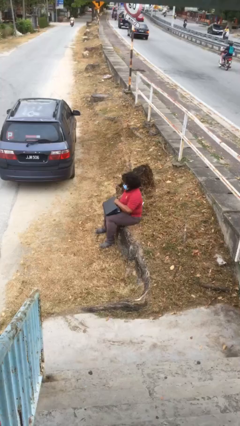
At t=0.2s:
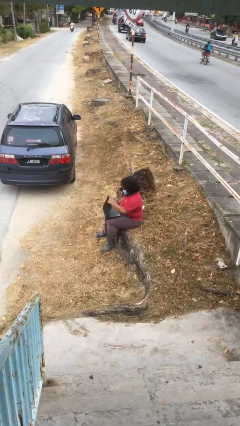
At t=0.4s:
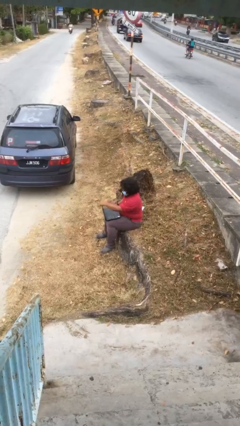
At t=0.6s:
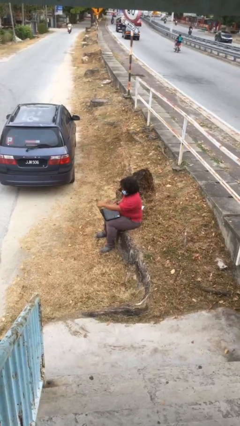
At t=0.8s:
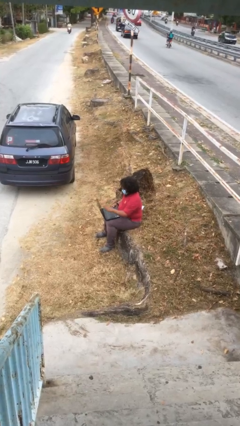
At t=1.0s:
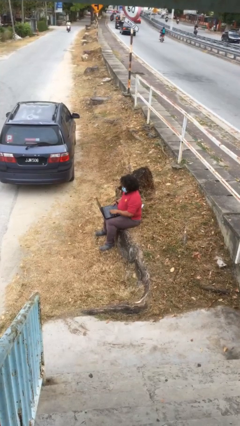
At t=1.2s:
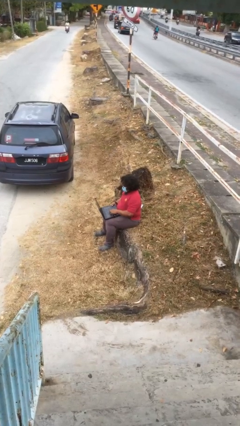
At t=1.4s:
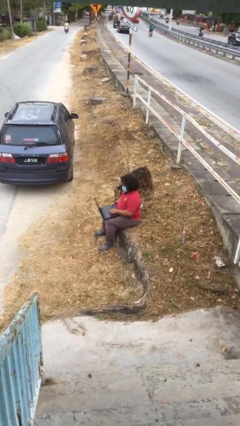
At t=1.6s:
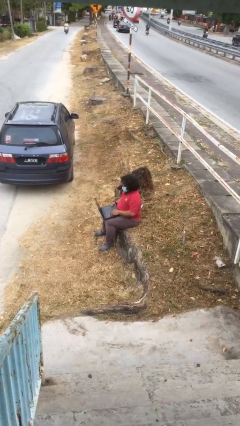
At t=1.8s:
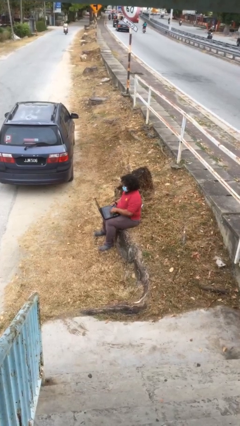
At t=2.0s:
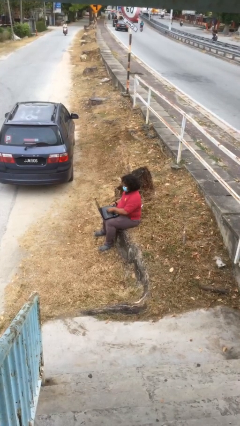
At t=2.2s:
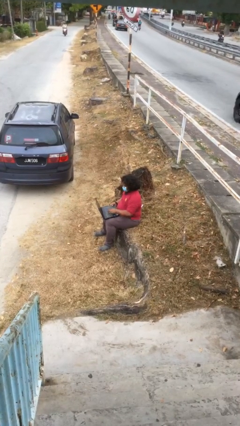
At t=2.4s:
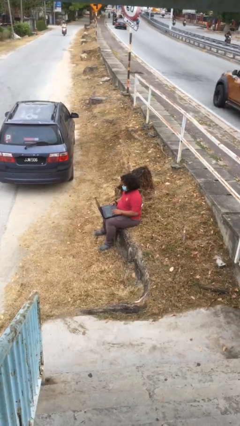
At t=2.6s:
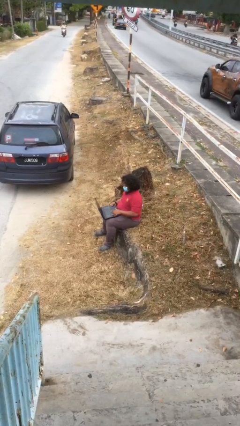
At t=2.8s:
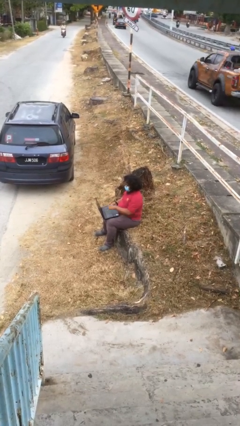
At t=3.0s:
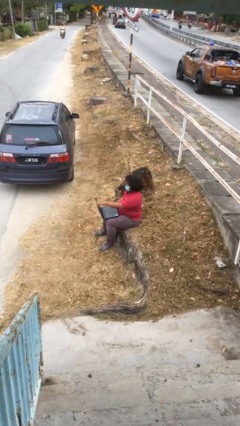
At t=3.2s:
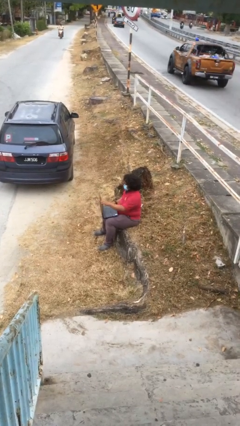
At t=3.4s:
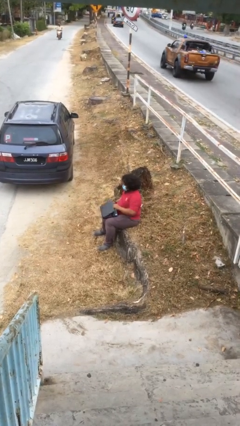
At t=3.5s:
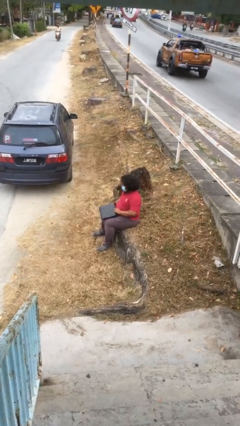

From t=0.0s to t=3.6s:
person interacts with laptop

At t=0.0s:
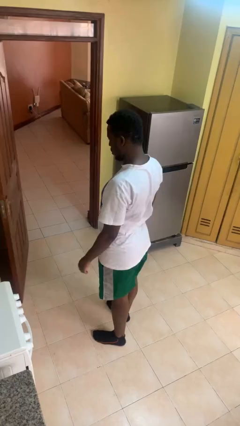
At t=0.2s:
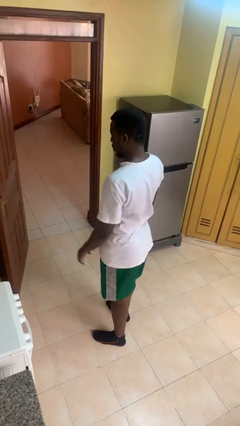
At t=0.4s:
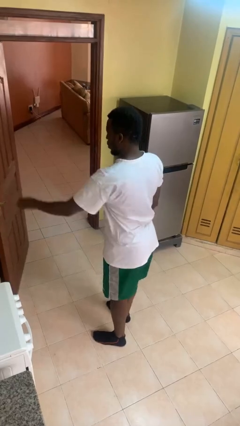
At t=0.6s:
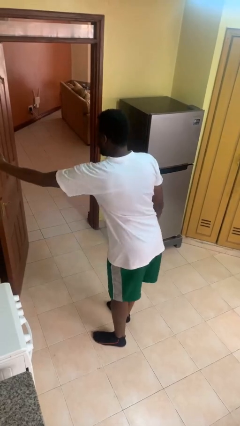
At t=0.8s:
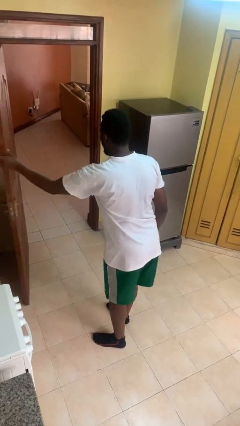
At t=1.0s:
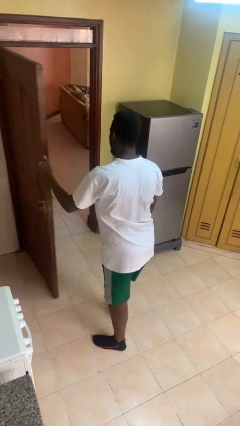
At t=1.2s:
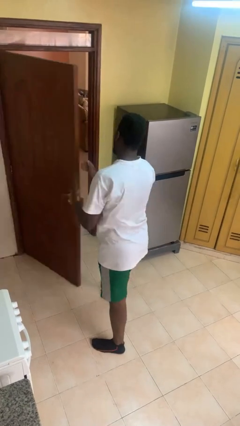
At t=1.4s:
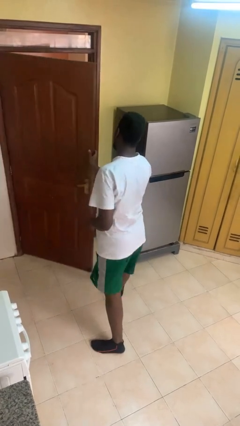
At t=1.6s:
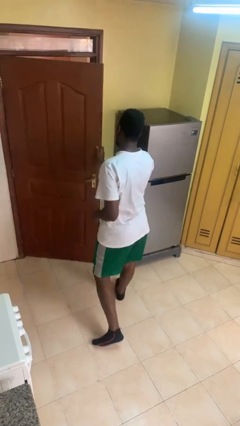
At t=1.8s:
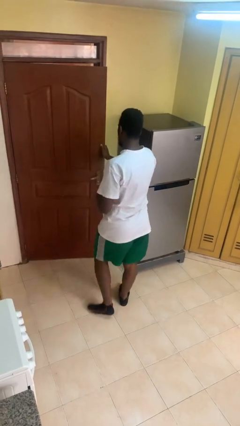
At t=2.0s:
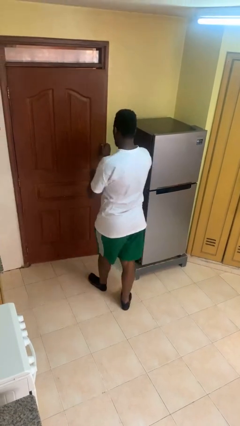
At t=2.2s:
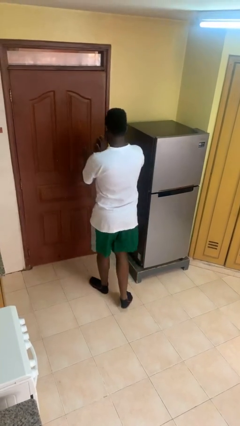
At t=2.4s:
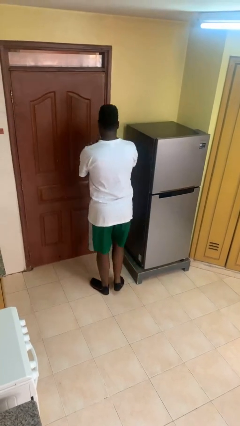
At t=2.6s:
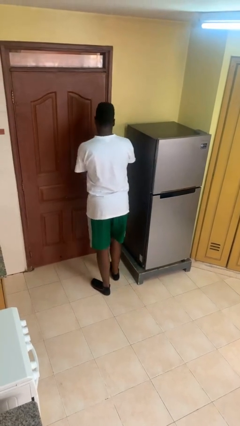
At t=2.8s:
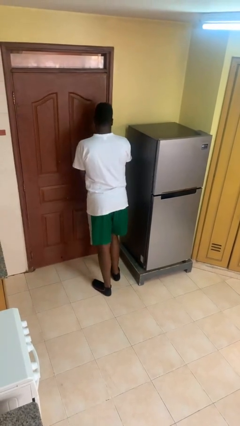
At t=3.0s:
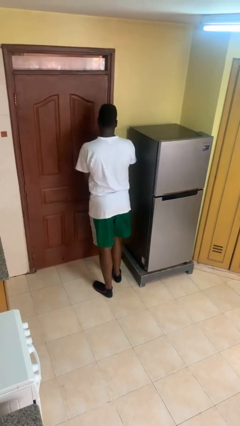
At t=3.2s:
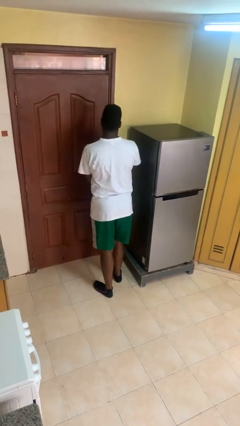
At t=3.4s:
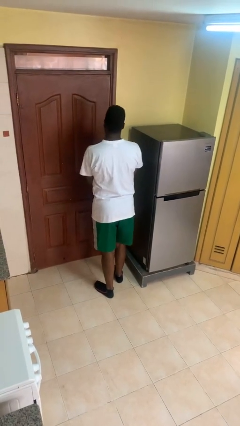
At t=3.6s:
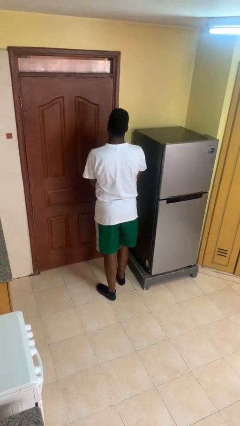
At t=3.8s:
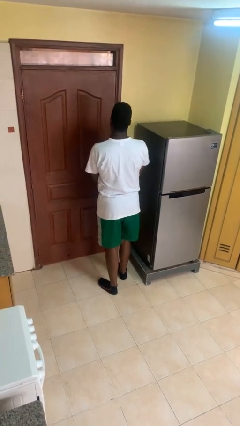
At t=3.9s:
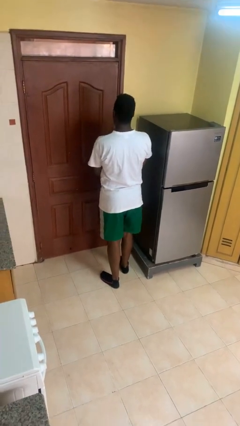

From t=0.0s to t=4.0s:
person closes facility door

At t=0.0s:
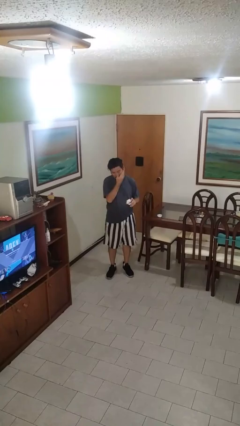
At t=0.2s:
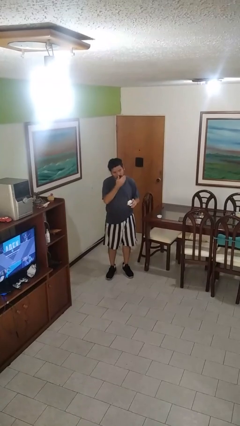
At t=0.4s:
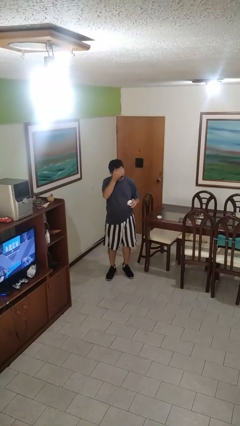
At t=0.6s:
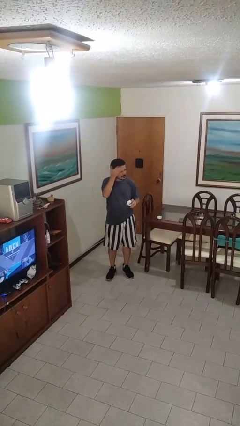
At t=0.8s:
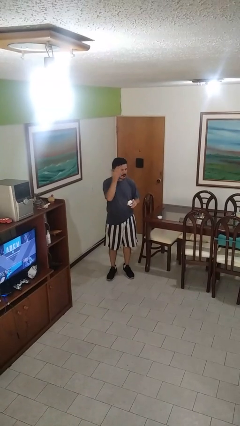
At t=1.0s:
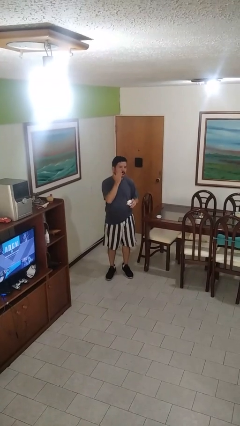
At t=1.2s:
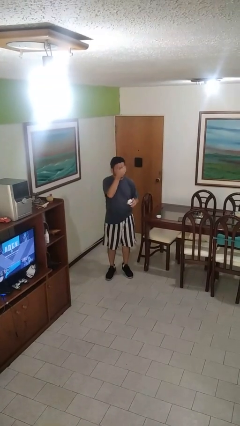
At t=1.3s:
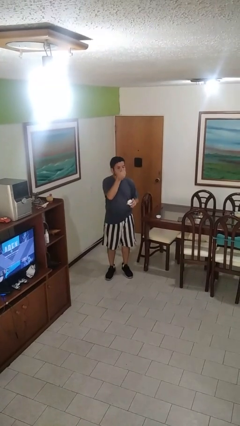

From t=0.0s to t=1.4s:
person applies facial moisturizer

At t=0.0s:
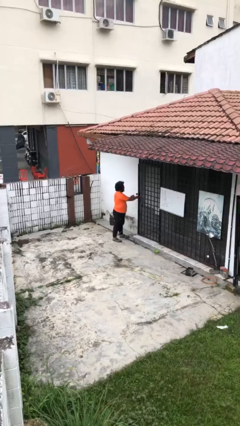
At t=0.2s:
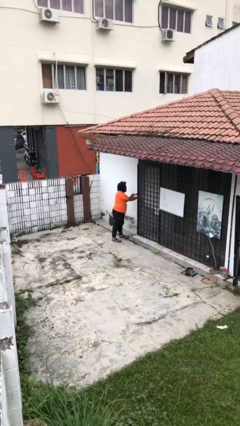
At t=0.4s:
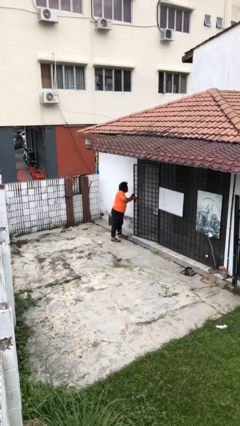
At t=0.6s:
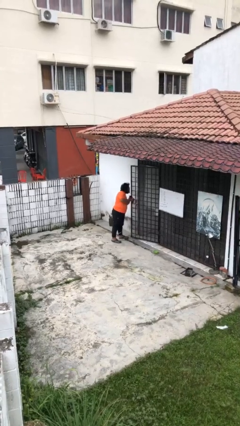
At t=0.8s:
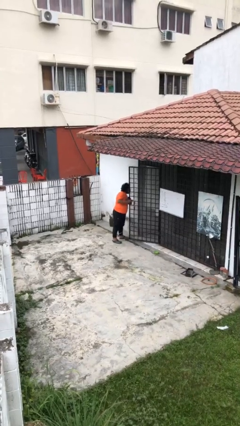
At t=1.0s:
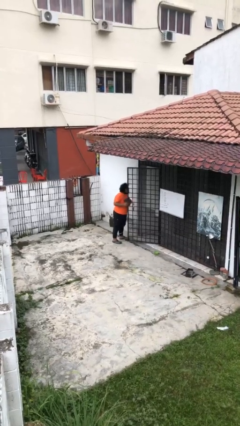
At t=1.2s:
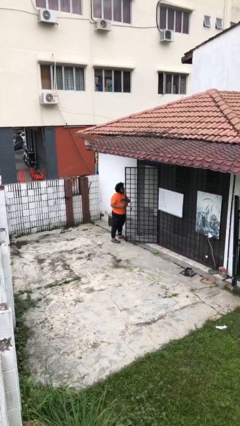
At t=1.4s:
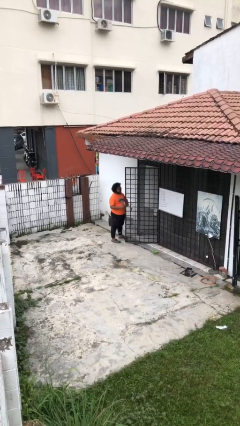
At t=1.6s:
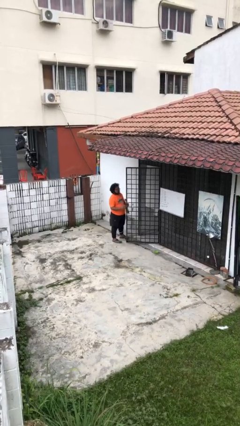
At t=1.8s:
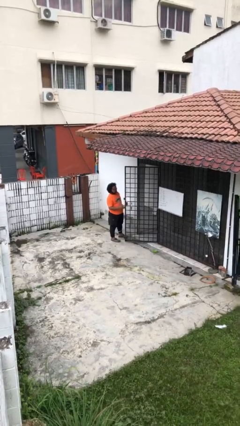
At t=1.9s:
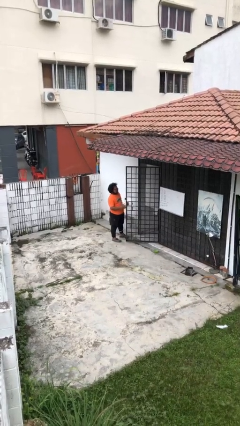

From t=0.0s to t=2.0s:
person opens facility door

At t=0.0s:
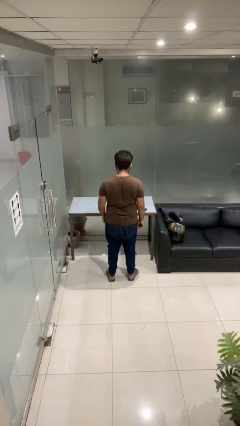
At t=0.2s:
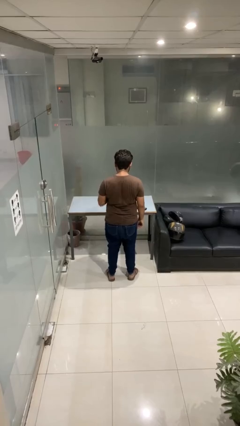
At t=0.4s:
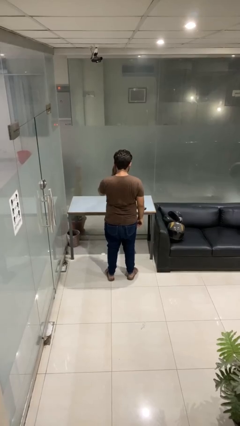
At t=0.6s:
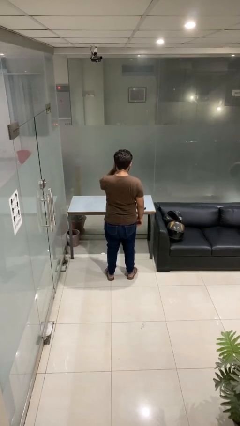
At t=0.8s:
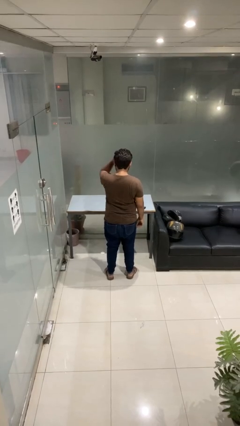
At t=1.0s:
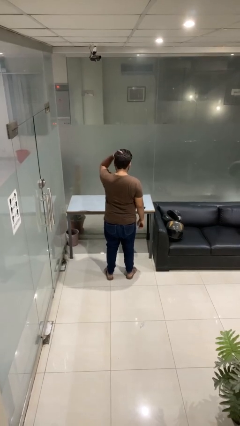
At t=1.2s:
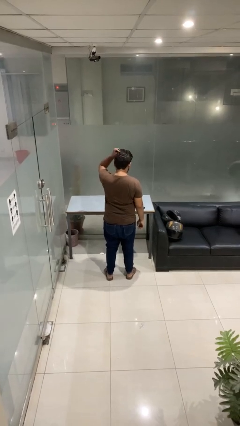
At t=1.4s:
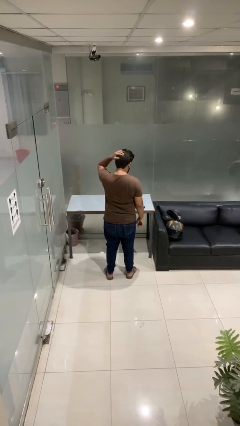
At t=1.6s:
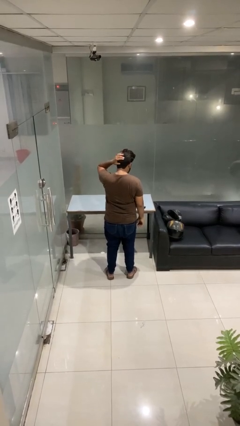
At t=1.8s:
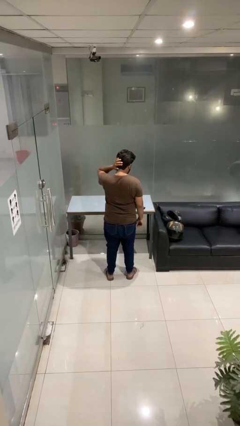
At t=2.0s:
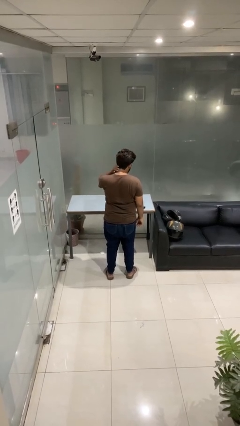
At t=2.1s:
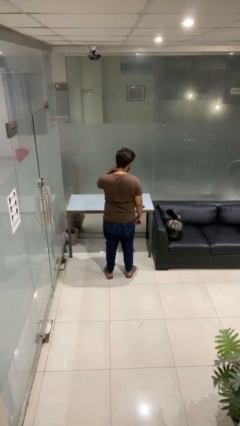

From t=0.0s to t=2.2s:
person strokes hair

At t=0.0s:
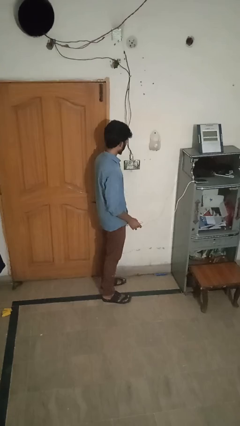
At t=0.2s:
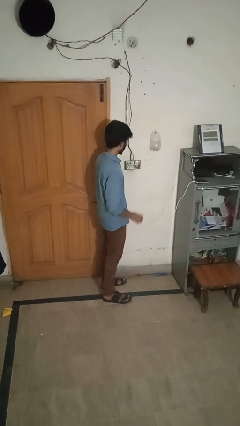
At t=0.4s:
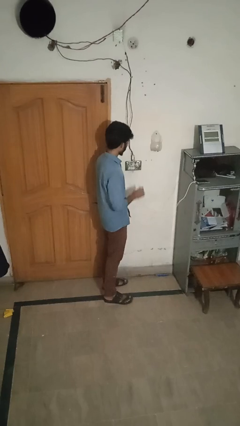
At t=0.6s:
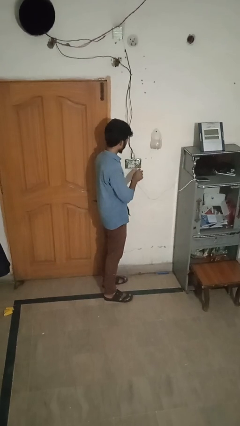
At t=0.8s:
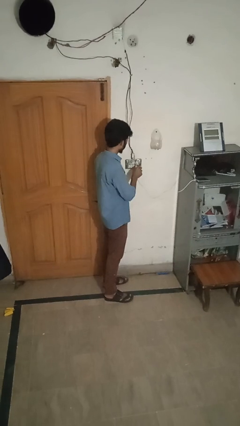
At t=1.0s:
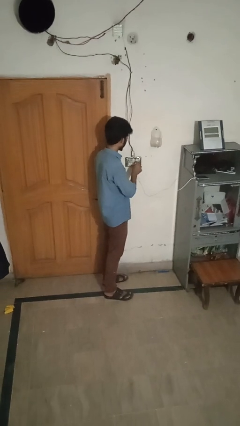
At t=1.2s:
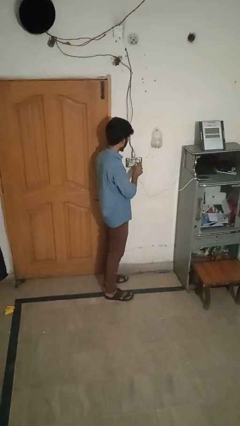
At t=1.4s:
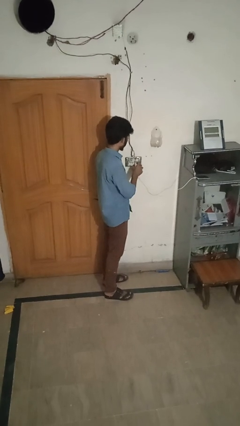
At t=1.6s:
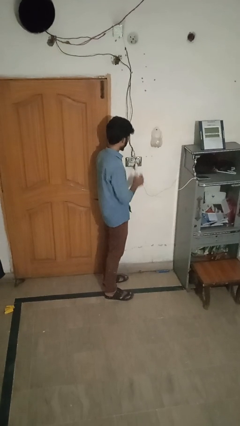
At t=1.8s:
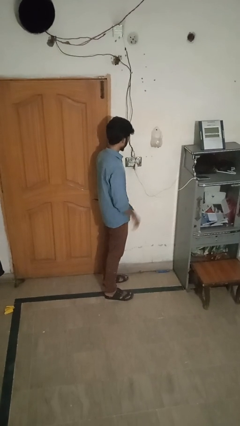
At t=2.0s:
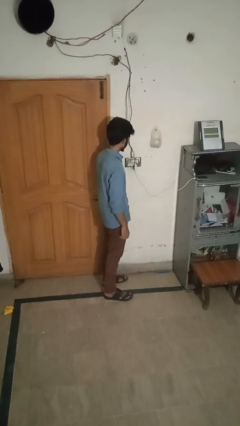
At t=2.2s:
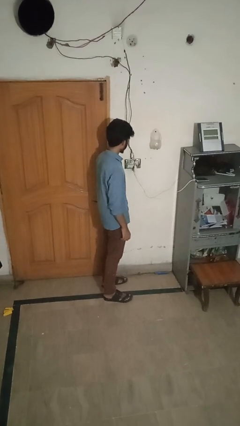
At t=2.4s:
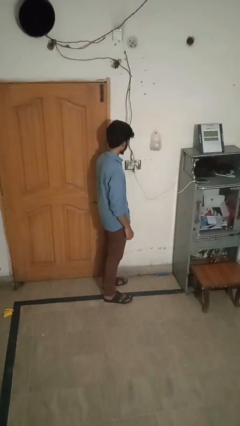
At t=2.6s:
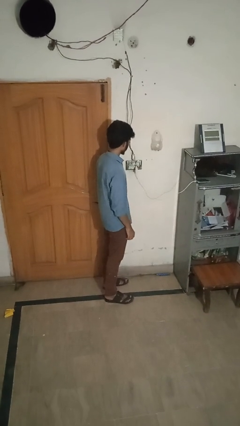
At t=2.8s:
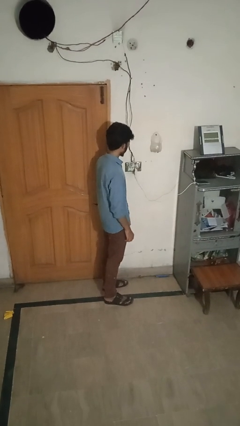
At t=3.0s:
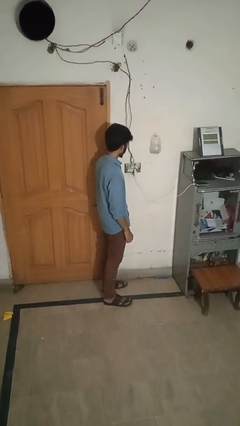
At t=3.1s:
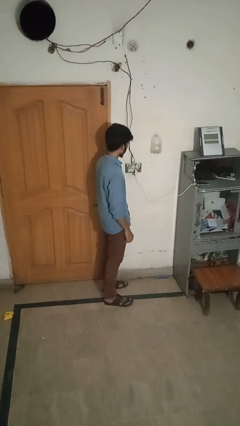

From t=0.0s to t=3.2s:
person plugs into electrical socket

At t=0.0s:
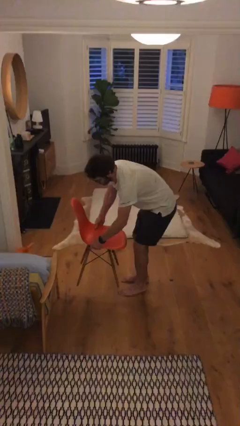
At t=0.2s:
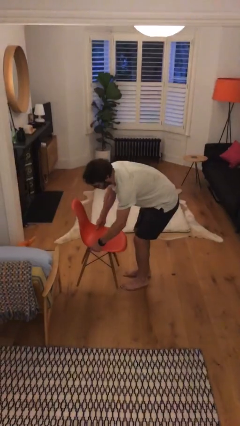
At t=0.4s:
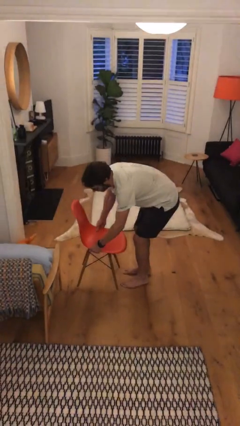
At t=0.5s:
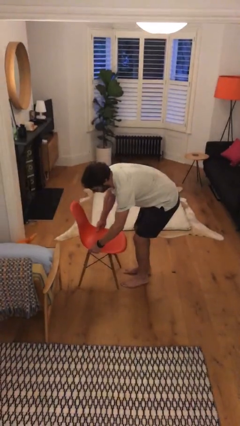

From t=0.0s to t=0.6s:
person puts down object on floor
